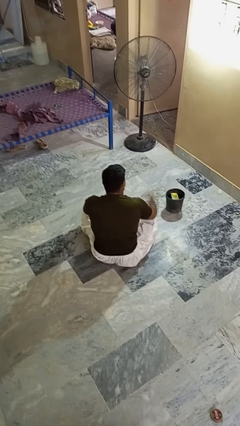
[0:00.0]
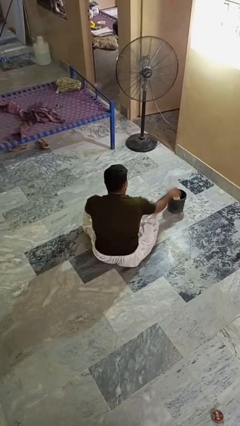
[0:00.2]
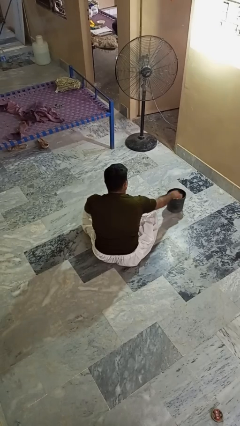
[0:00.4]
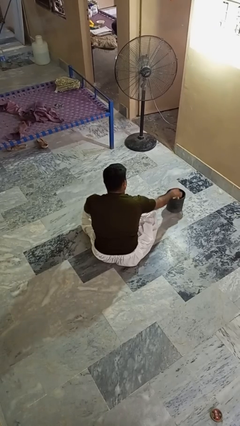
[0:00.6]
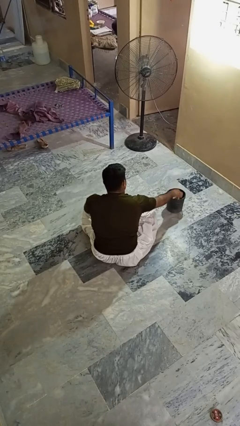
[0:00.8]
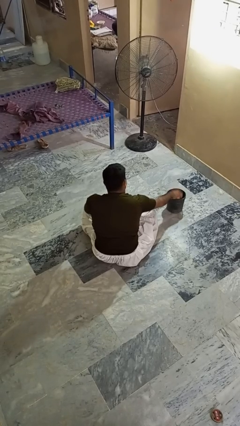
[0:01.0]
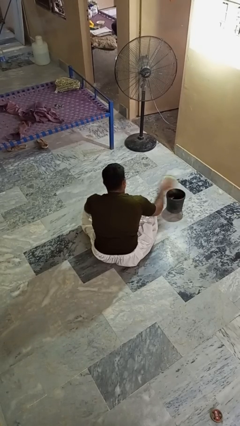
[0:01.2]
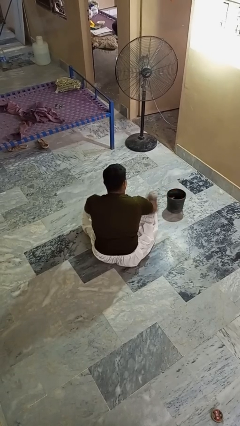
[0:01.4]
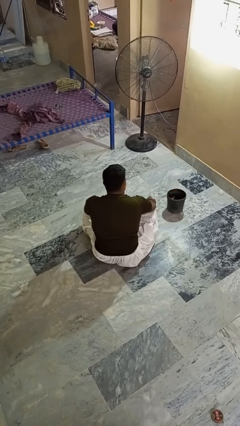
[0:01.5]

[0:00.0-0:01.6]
person takes object from basket

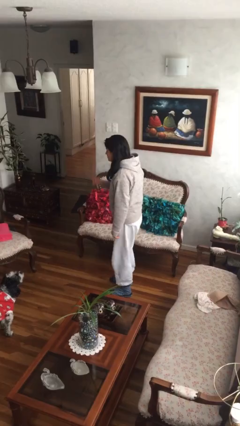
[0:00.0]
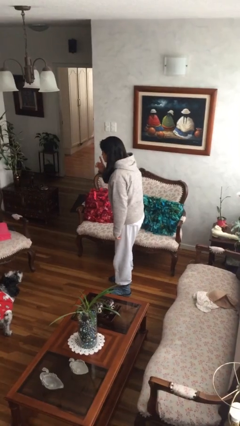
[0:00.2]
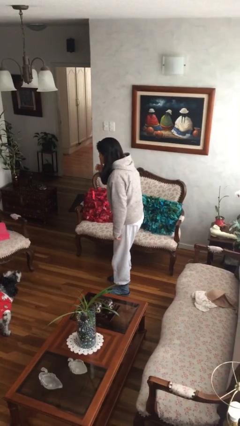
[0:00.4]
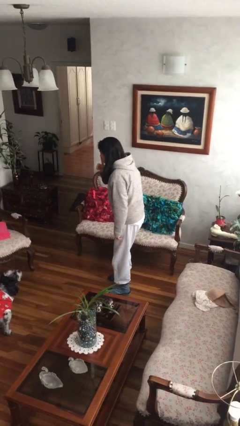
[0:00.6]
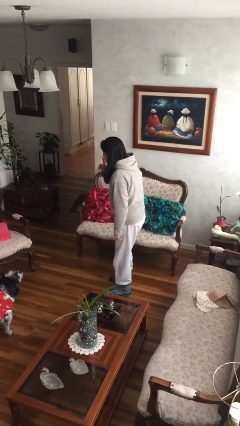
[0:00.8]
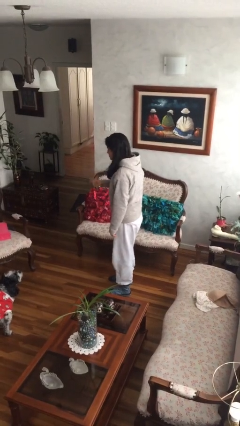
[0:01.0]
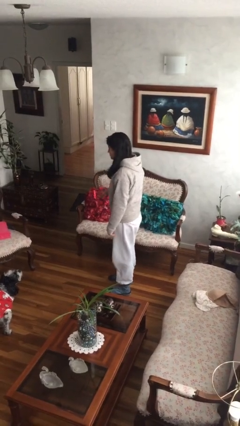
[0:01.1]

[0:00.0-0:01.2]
person gestures be quiet

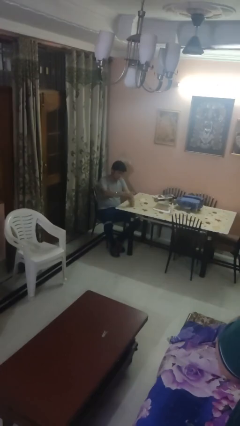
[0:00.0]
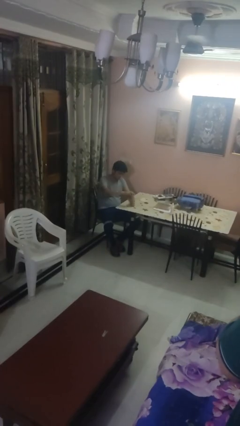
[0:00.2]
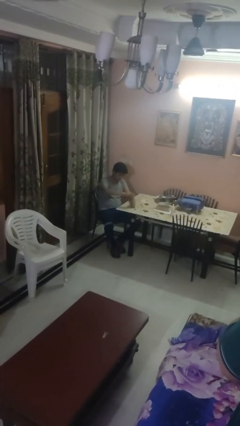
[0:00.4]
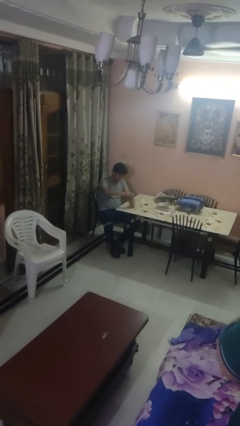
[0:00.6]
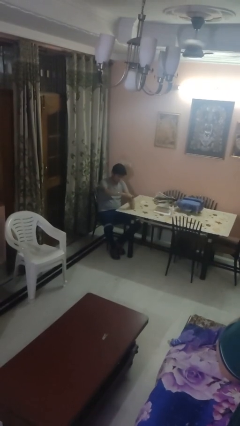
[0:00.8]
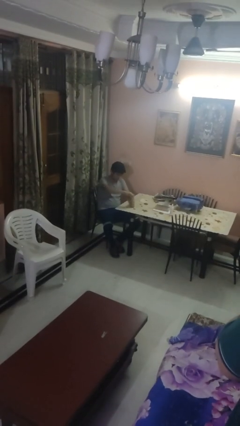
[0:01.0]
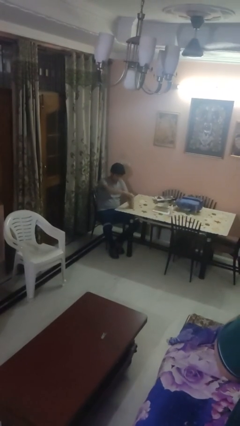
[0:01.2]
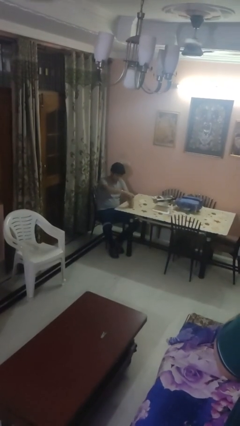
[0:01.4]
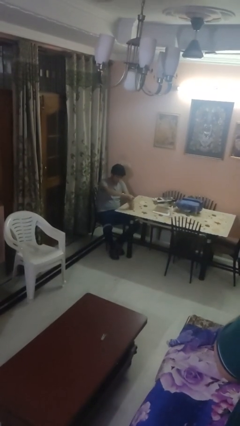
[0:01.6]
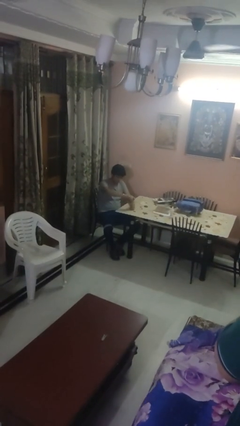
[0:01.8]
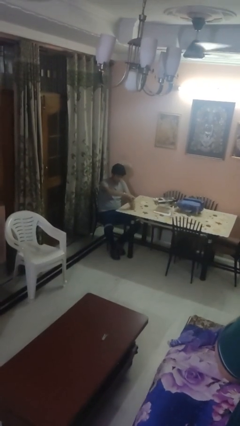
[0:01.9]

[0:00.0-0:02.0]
person screws lid to bottle

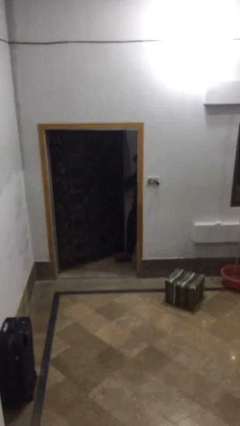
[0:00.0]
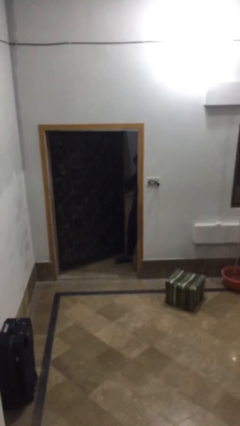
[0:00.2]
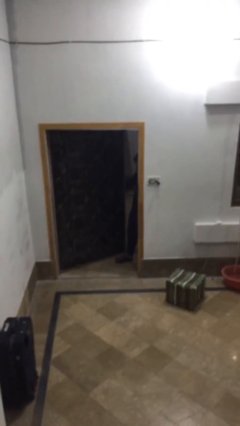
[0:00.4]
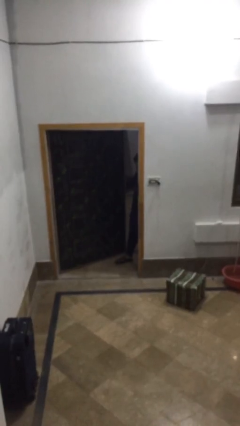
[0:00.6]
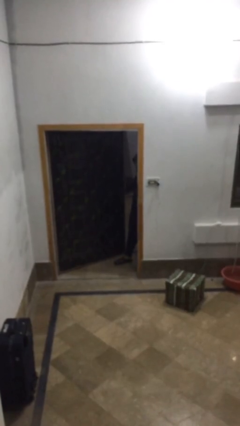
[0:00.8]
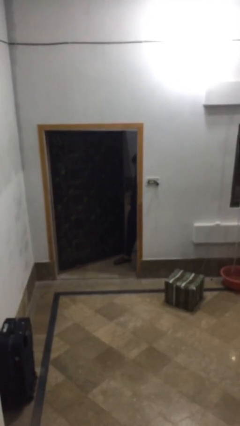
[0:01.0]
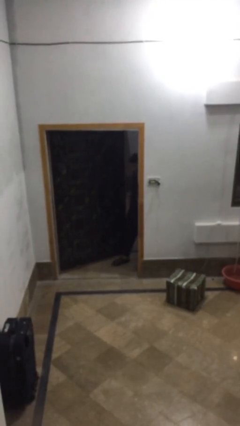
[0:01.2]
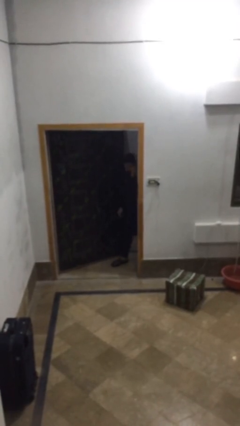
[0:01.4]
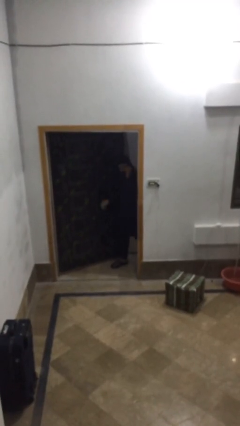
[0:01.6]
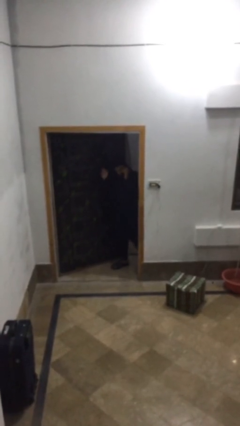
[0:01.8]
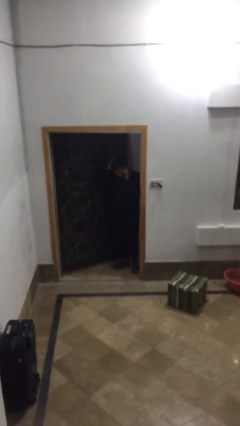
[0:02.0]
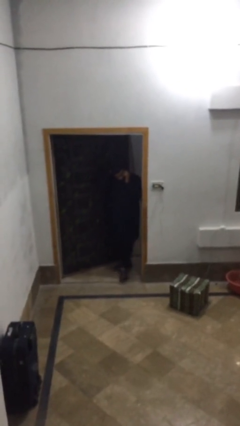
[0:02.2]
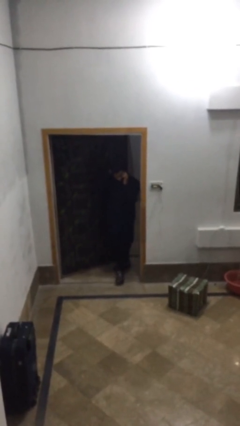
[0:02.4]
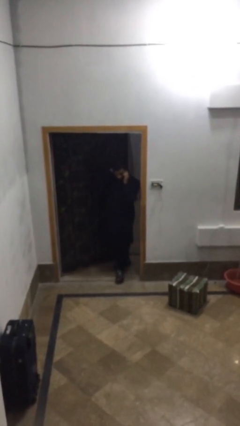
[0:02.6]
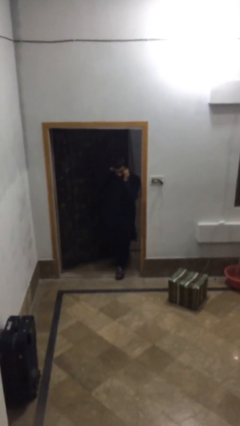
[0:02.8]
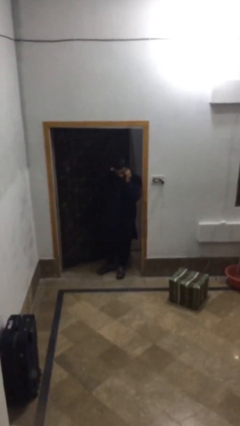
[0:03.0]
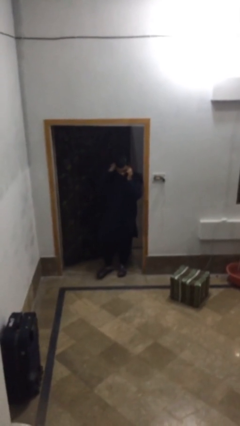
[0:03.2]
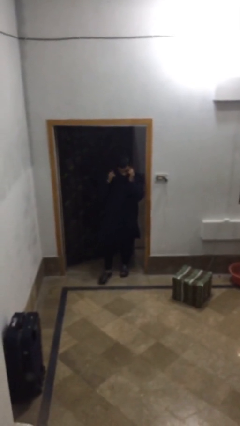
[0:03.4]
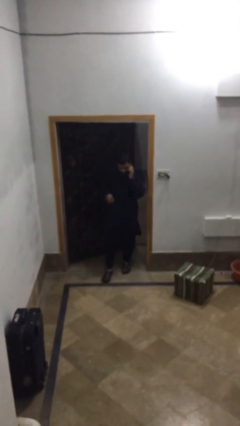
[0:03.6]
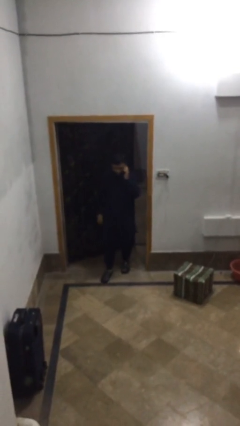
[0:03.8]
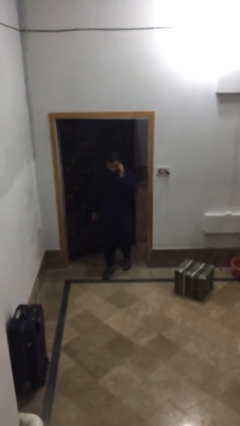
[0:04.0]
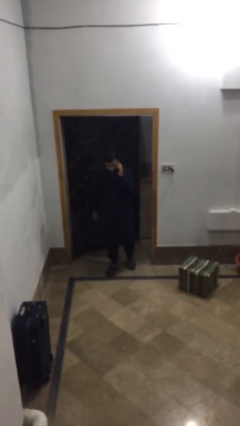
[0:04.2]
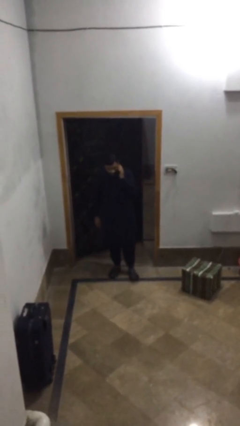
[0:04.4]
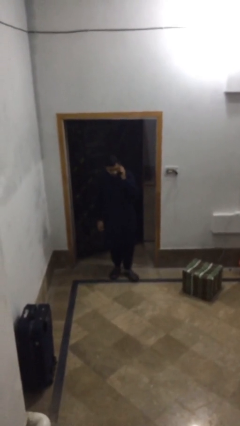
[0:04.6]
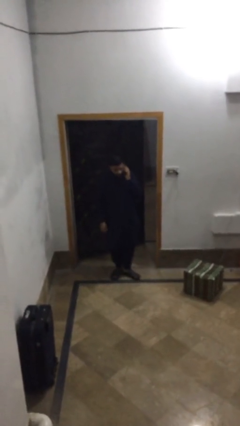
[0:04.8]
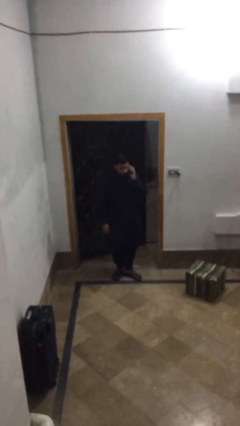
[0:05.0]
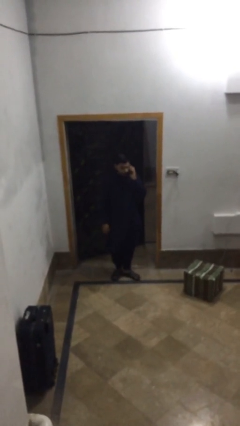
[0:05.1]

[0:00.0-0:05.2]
person enters scene through structure

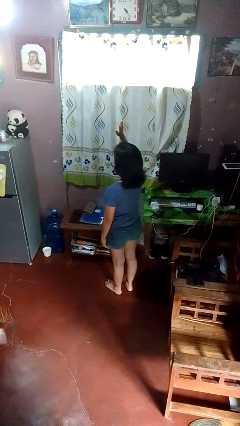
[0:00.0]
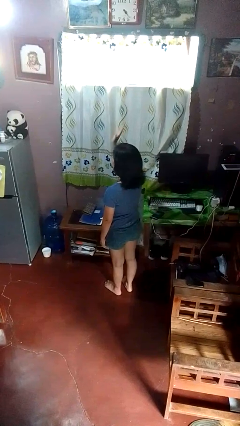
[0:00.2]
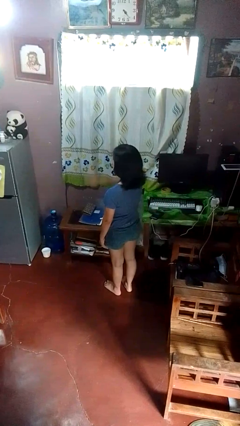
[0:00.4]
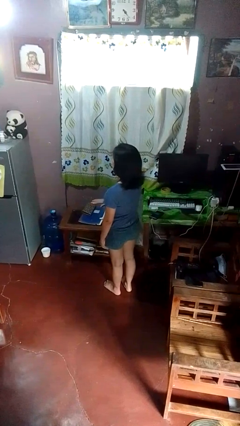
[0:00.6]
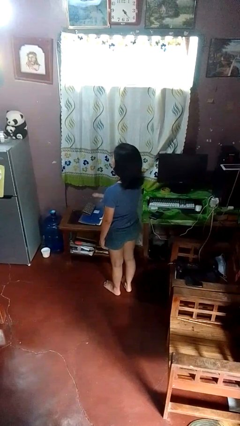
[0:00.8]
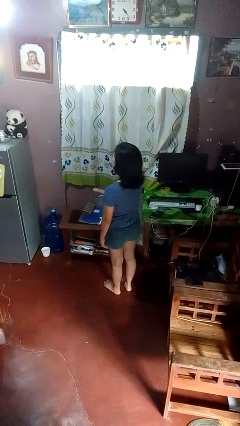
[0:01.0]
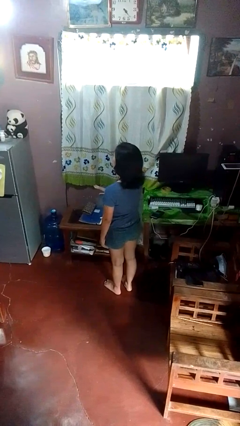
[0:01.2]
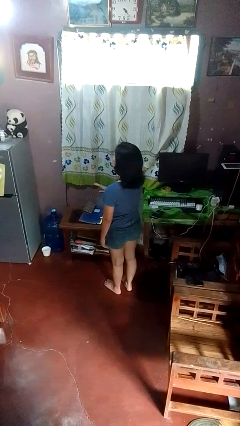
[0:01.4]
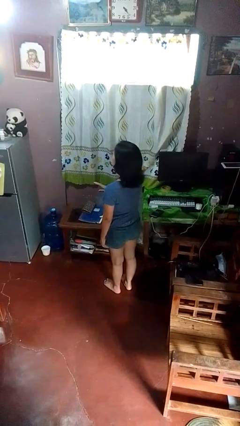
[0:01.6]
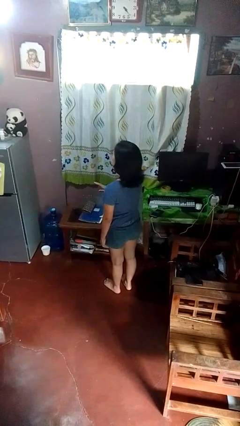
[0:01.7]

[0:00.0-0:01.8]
person gestures swipe down

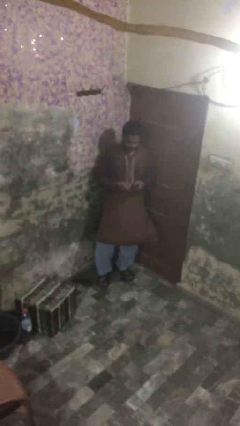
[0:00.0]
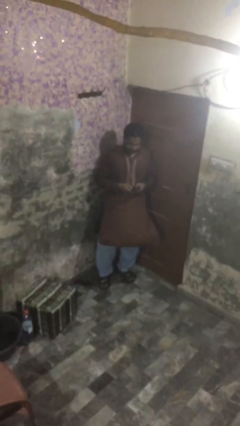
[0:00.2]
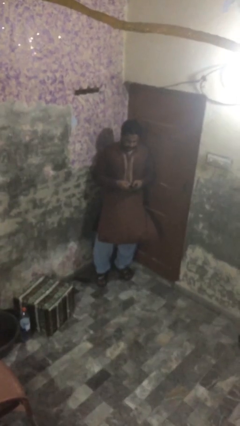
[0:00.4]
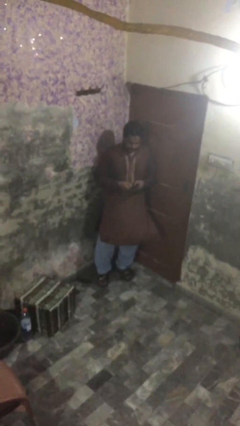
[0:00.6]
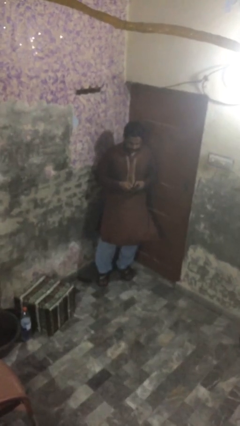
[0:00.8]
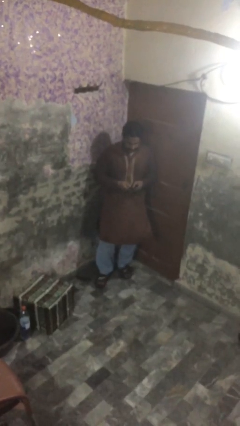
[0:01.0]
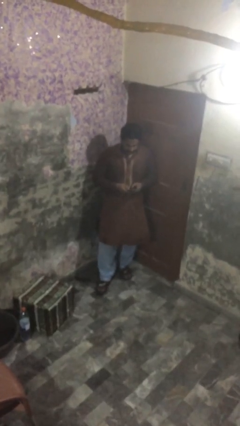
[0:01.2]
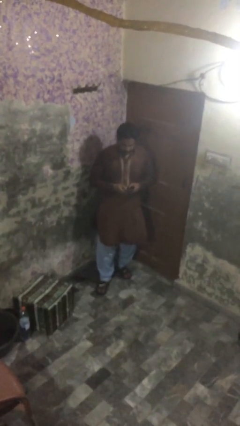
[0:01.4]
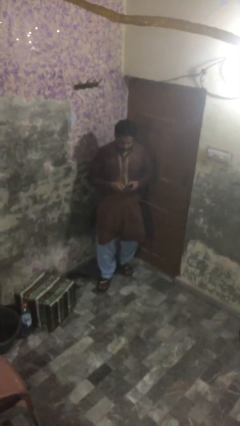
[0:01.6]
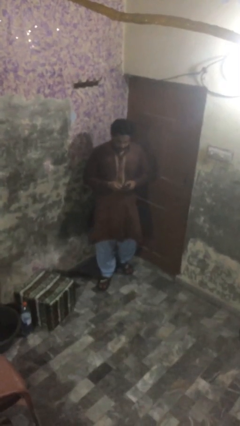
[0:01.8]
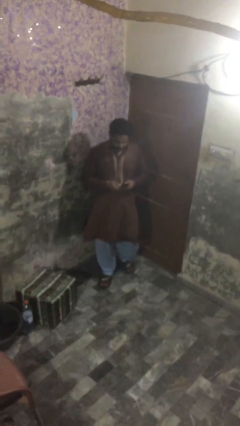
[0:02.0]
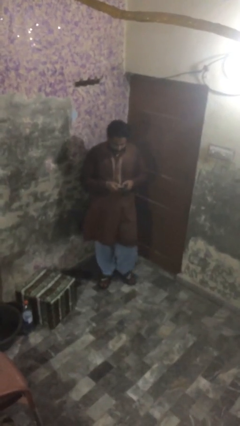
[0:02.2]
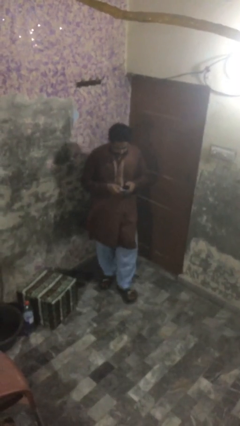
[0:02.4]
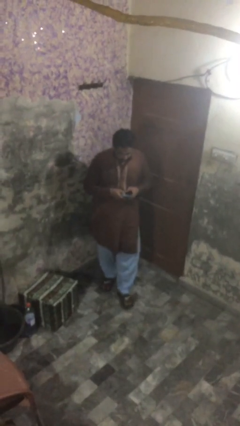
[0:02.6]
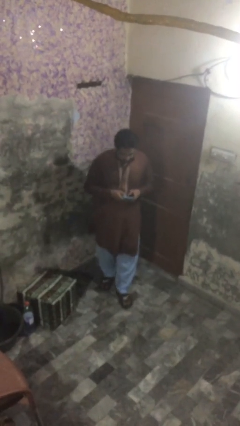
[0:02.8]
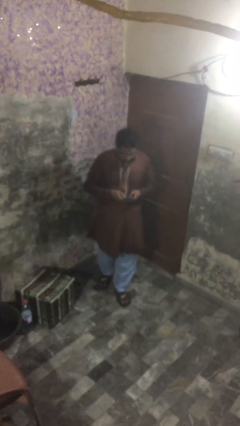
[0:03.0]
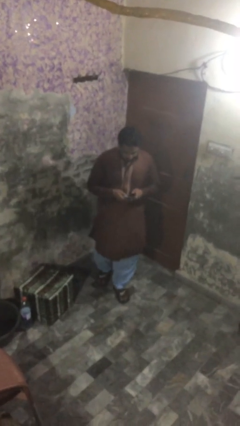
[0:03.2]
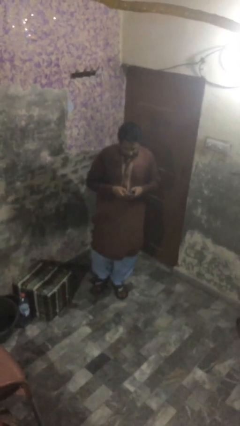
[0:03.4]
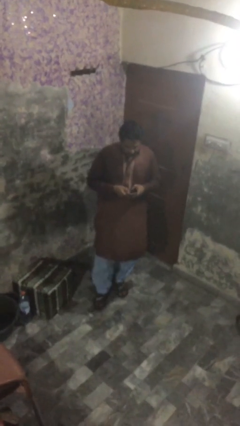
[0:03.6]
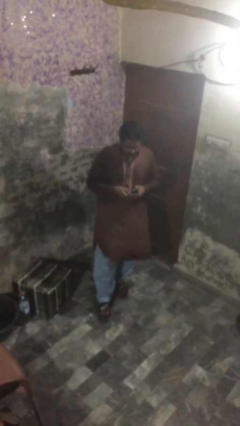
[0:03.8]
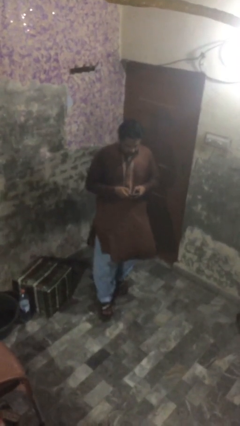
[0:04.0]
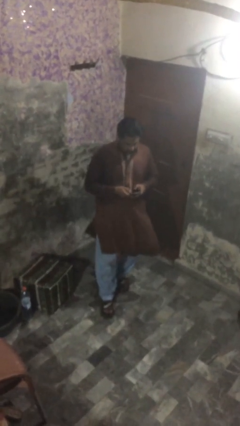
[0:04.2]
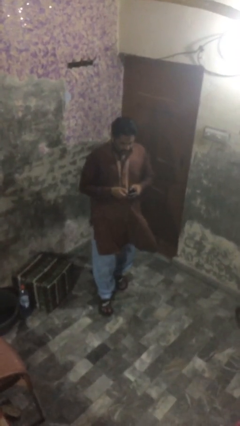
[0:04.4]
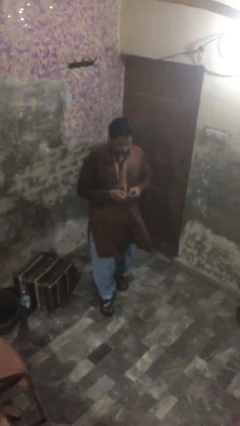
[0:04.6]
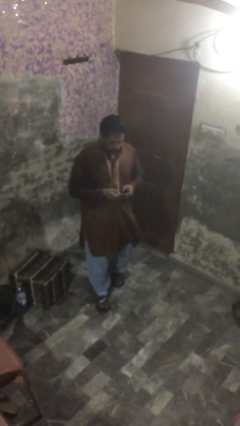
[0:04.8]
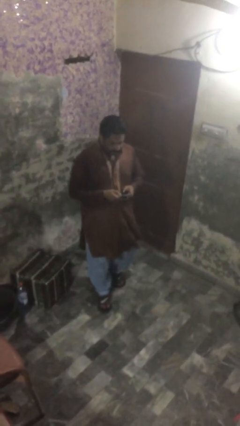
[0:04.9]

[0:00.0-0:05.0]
person texts on phone

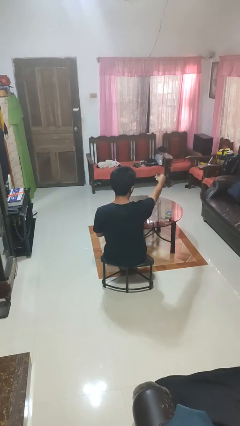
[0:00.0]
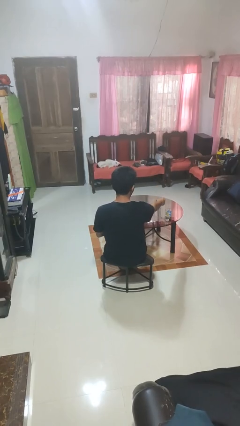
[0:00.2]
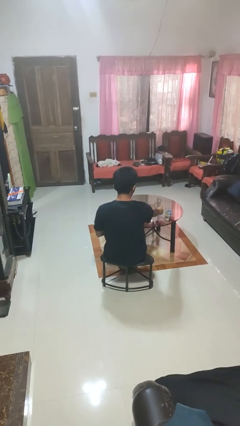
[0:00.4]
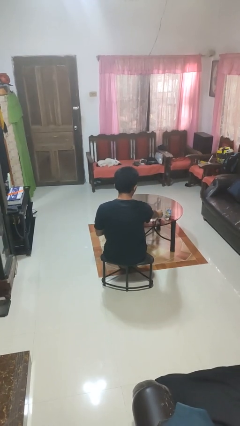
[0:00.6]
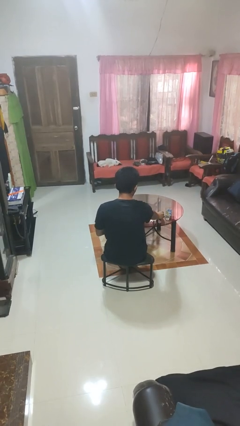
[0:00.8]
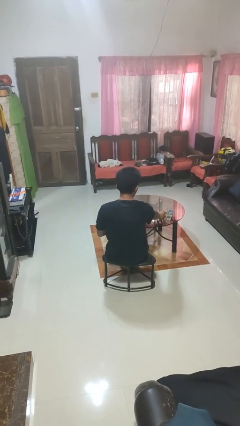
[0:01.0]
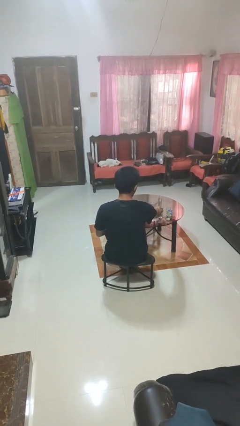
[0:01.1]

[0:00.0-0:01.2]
person puts down object on table
